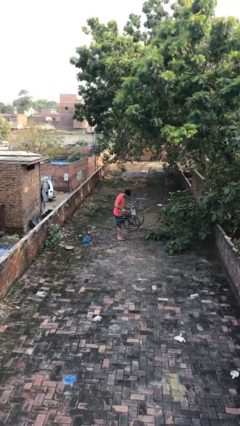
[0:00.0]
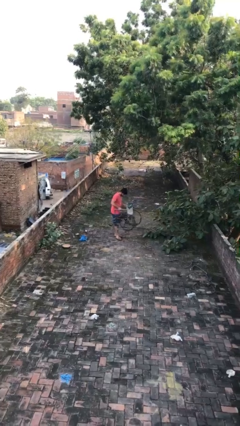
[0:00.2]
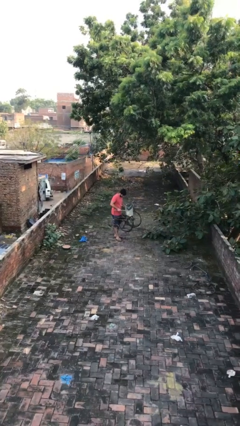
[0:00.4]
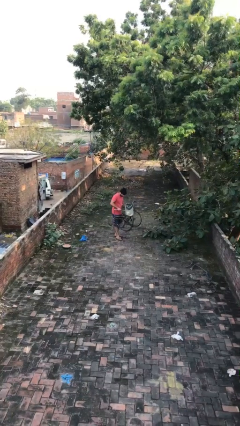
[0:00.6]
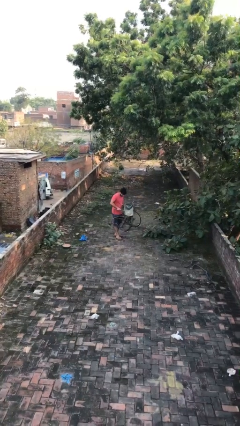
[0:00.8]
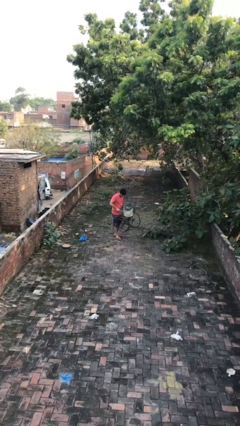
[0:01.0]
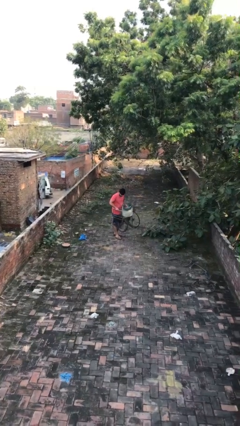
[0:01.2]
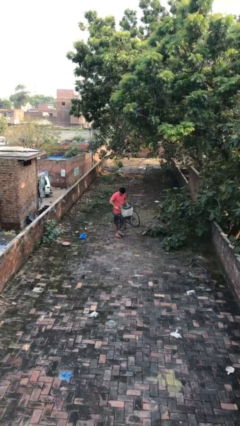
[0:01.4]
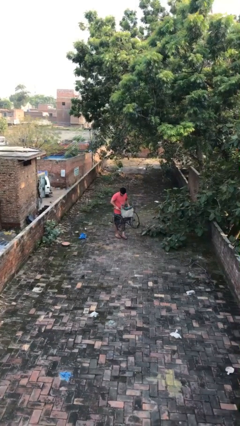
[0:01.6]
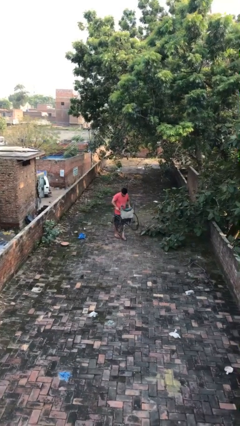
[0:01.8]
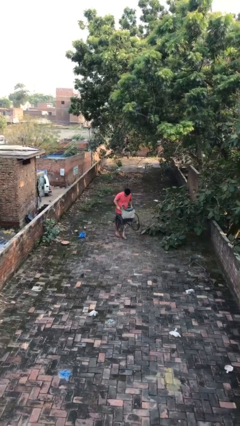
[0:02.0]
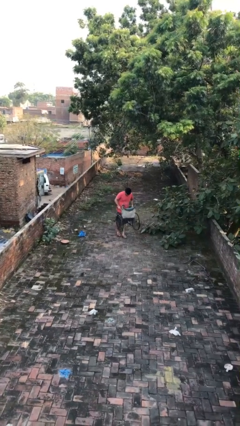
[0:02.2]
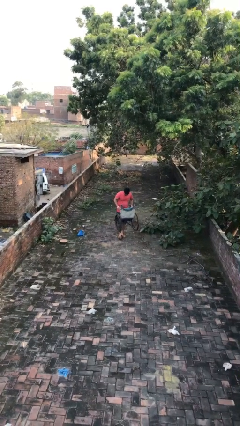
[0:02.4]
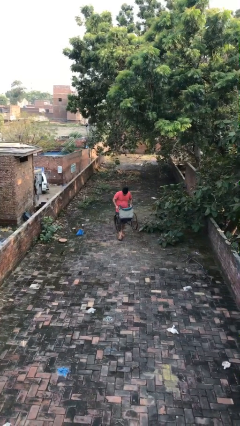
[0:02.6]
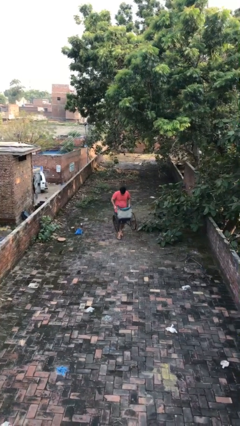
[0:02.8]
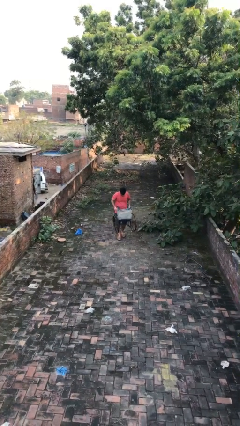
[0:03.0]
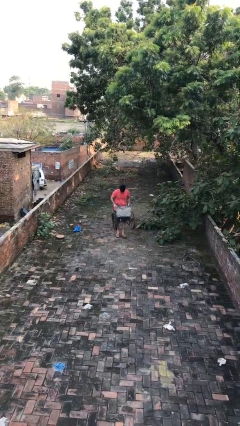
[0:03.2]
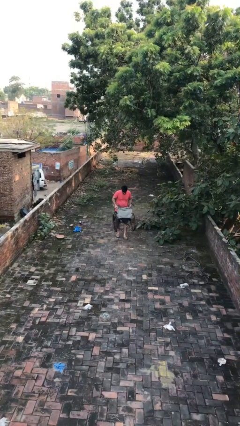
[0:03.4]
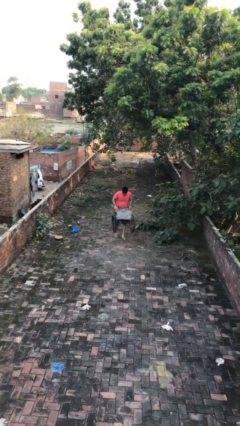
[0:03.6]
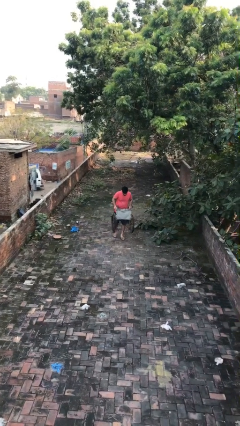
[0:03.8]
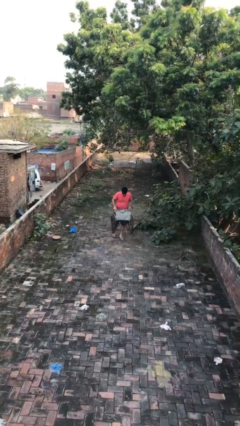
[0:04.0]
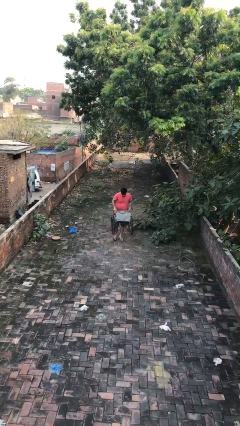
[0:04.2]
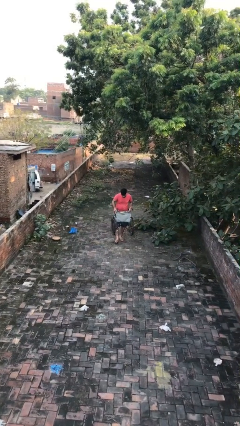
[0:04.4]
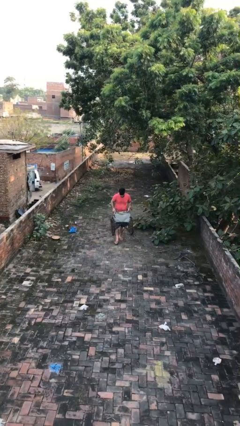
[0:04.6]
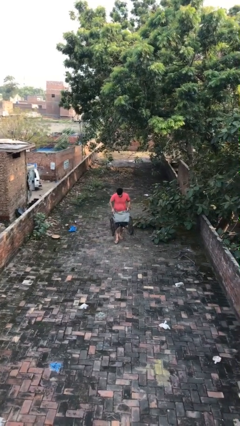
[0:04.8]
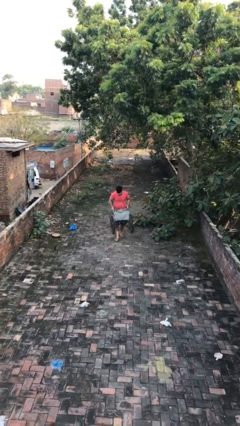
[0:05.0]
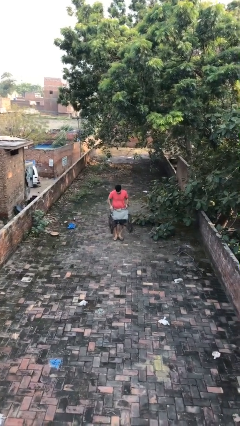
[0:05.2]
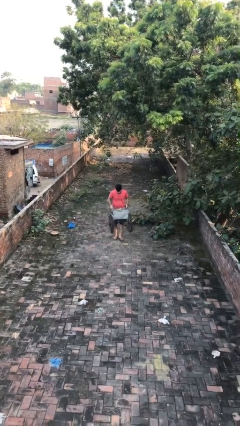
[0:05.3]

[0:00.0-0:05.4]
person carries heavy object

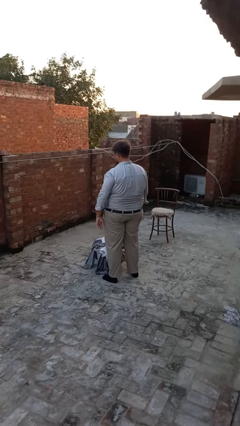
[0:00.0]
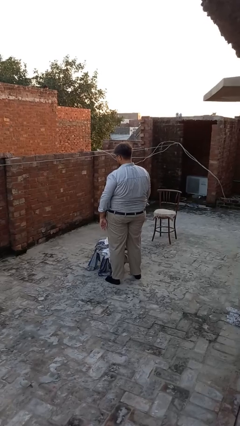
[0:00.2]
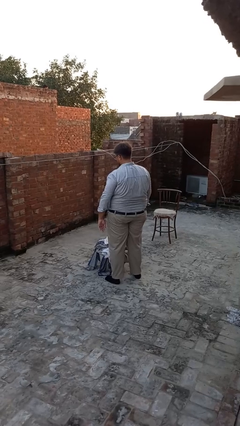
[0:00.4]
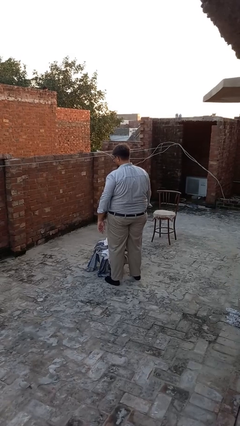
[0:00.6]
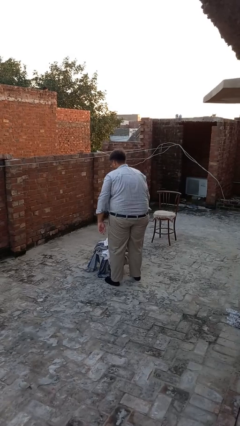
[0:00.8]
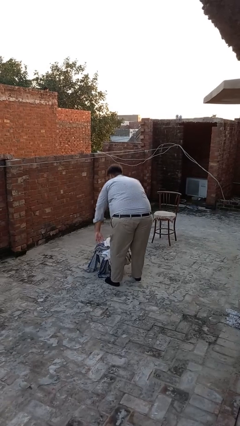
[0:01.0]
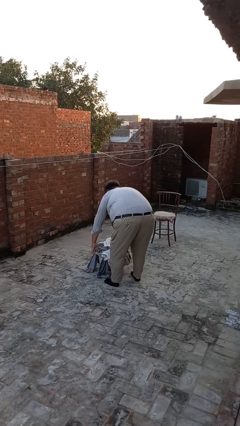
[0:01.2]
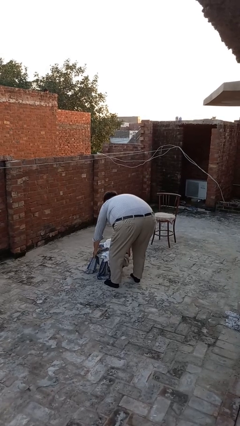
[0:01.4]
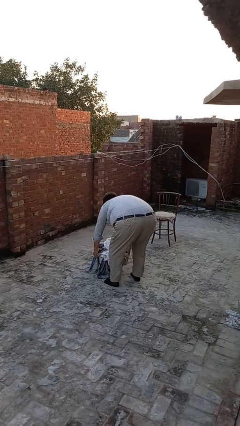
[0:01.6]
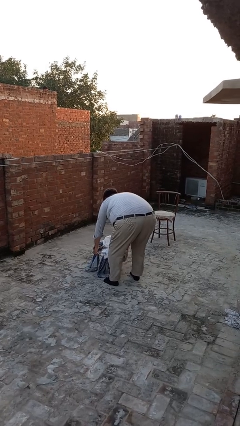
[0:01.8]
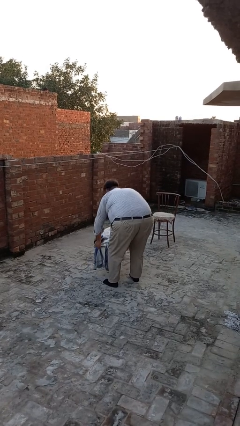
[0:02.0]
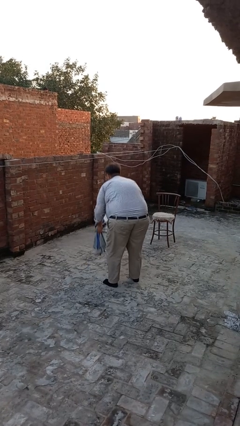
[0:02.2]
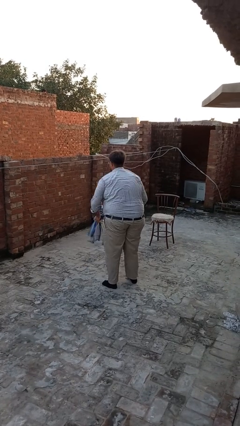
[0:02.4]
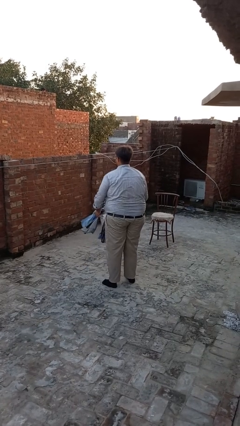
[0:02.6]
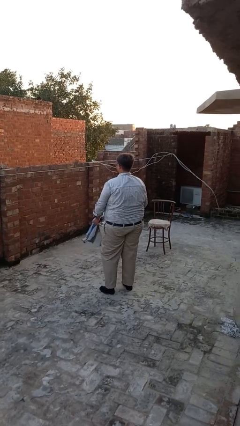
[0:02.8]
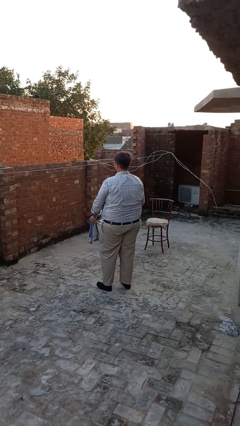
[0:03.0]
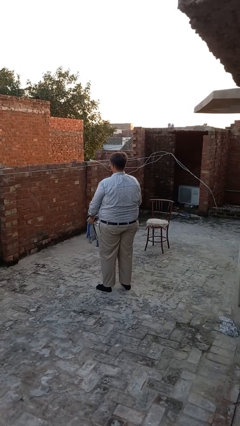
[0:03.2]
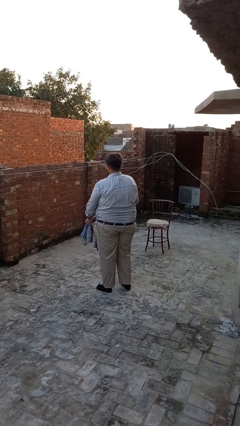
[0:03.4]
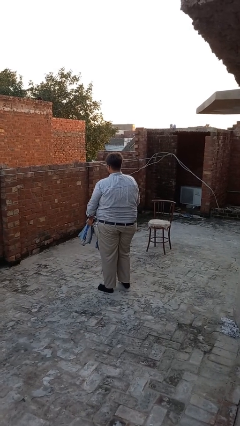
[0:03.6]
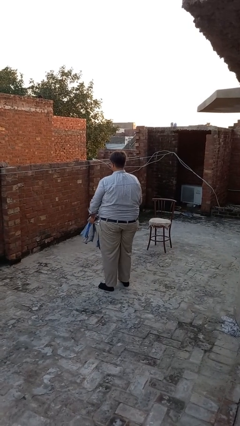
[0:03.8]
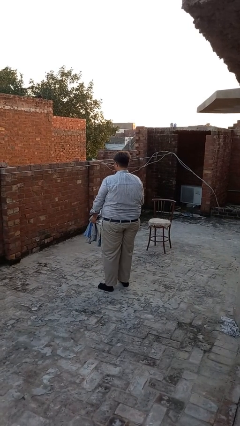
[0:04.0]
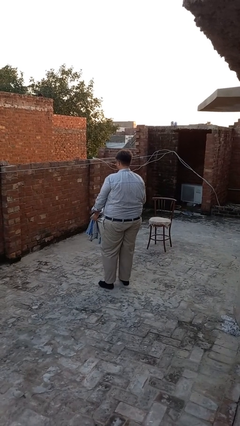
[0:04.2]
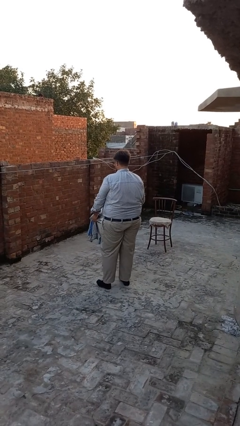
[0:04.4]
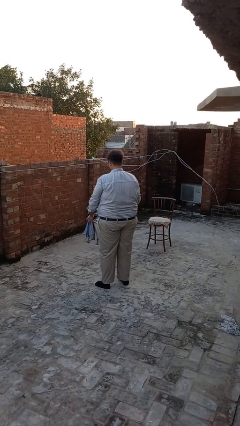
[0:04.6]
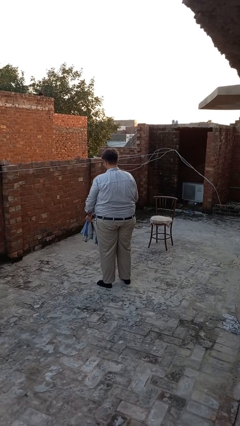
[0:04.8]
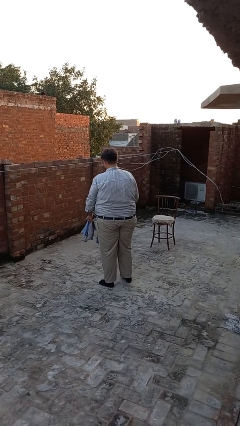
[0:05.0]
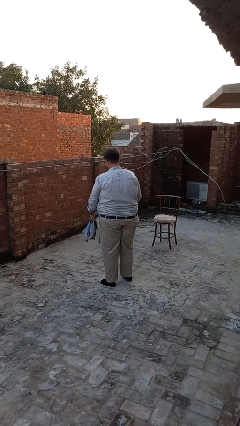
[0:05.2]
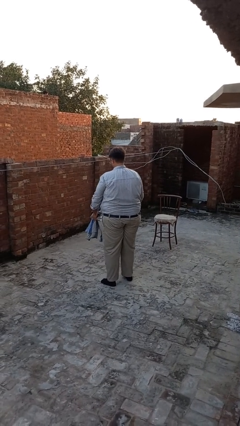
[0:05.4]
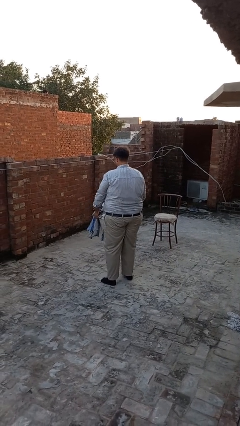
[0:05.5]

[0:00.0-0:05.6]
person carries laundry basket

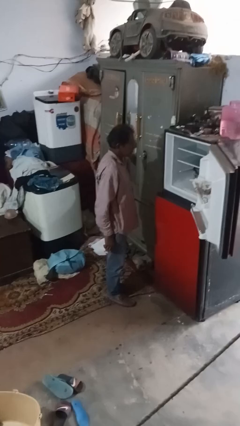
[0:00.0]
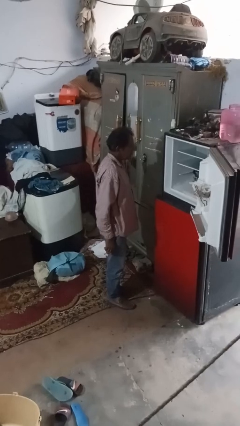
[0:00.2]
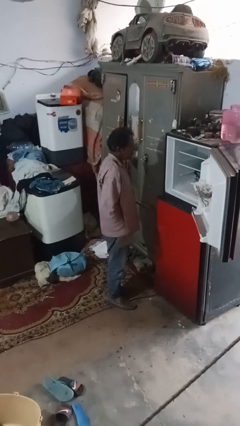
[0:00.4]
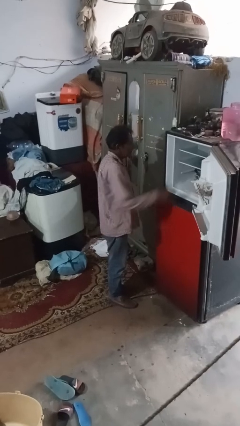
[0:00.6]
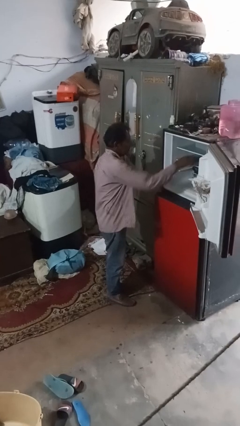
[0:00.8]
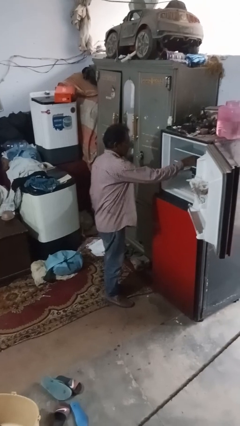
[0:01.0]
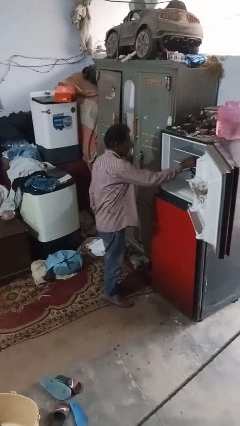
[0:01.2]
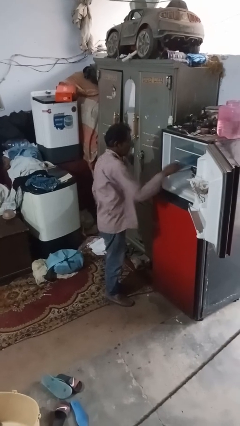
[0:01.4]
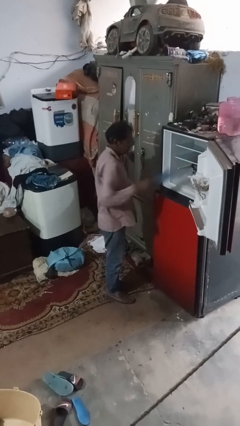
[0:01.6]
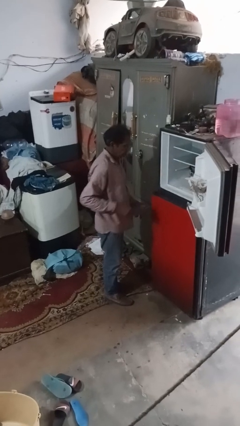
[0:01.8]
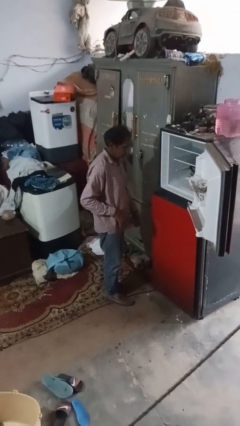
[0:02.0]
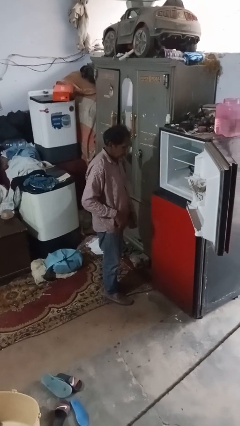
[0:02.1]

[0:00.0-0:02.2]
person takes object from refrigerator

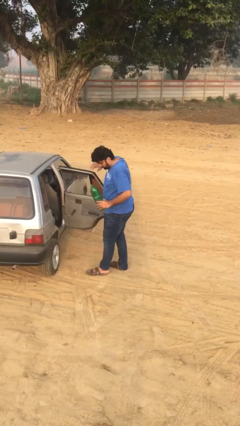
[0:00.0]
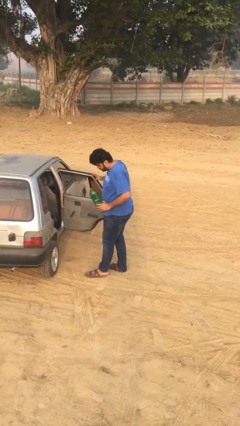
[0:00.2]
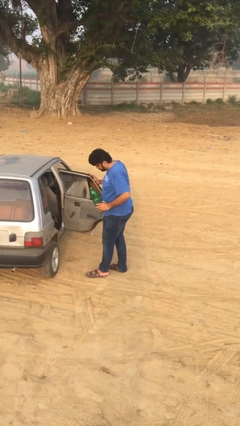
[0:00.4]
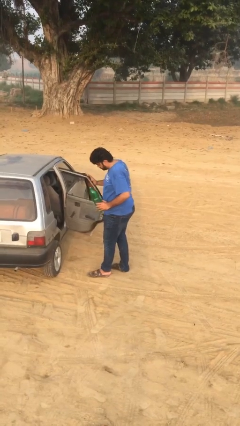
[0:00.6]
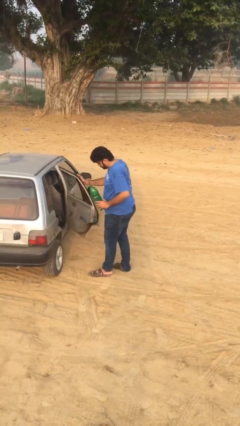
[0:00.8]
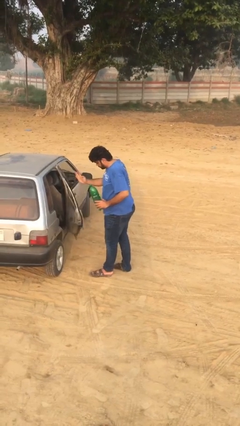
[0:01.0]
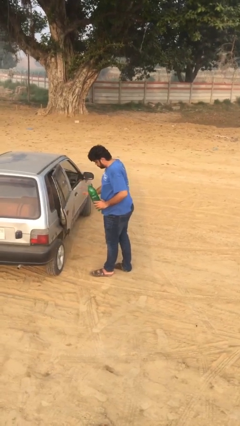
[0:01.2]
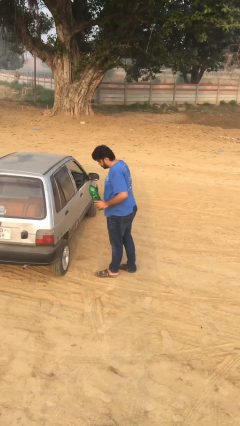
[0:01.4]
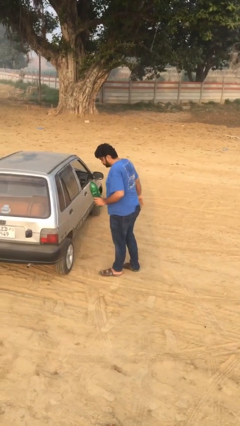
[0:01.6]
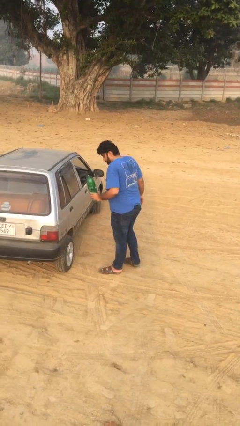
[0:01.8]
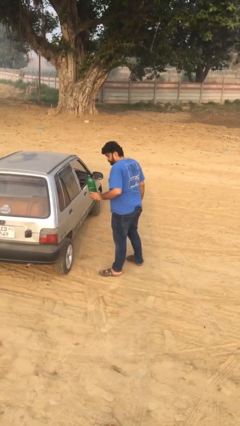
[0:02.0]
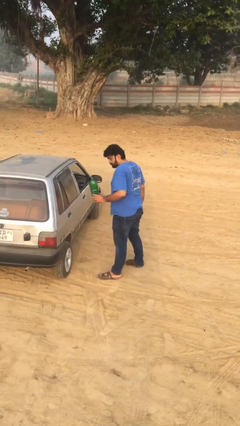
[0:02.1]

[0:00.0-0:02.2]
person closes car door

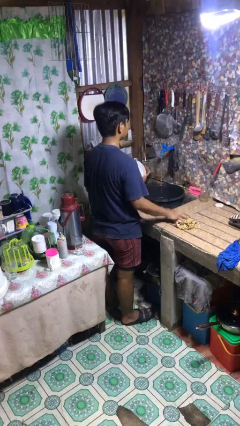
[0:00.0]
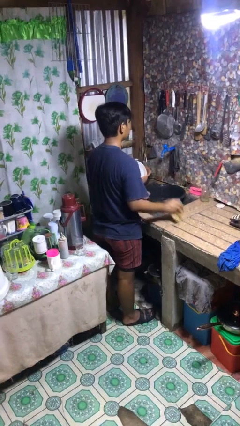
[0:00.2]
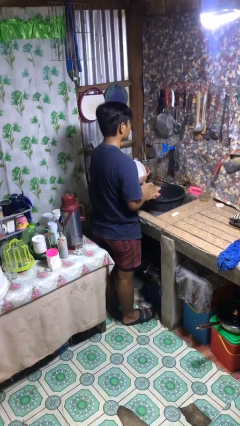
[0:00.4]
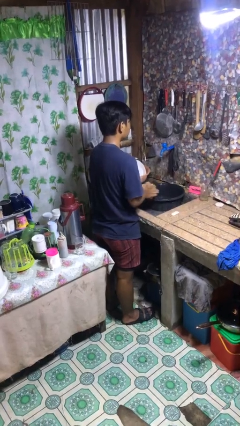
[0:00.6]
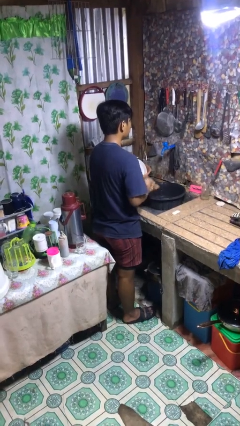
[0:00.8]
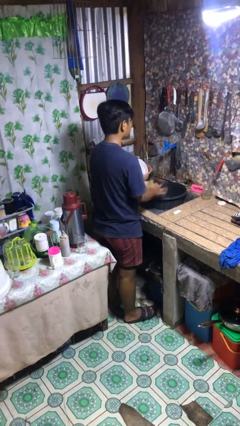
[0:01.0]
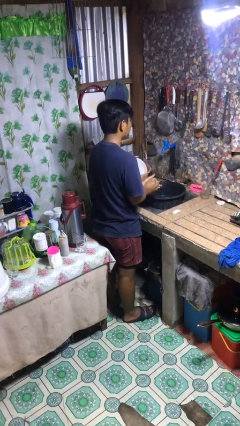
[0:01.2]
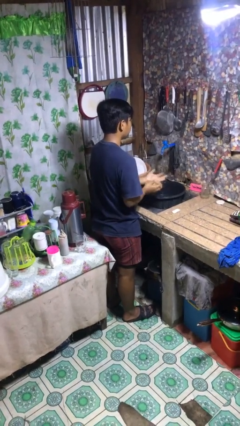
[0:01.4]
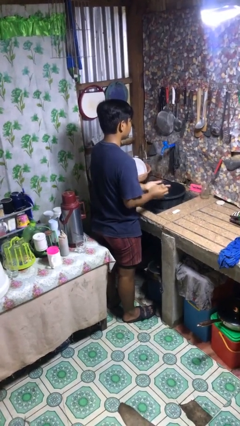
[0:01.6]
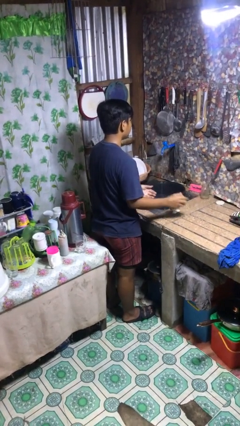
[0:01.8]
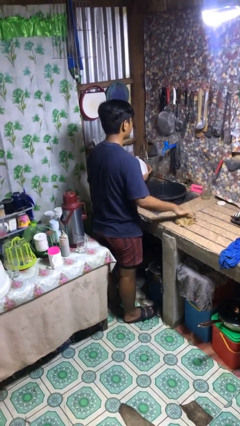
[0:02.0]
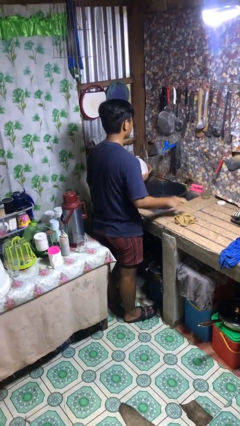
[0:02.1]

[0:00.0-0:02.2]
person dries hands with towel
